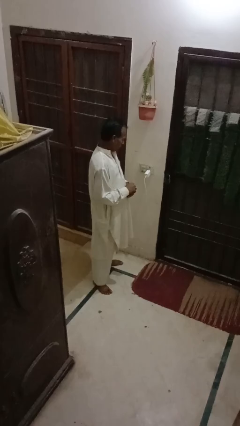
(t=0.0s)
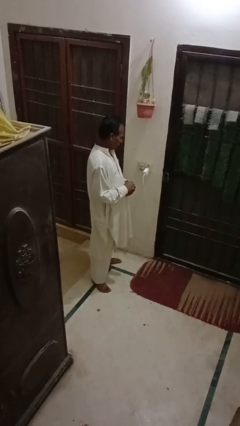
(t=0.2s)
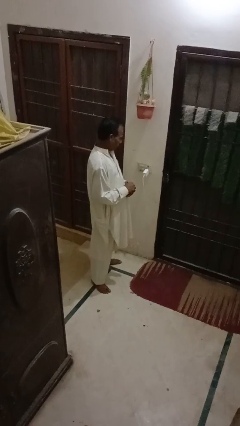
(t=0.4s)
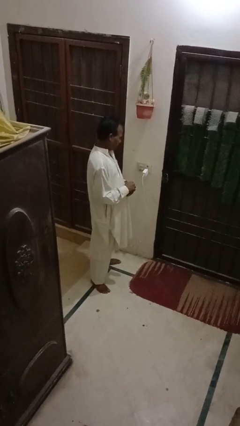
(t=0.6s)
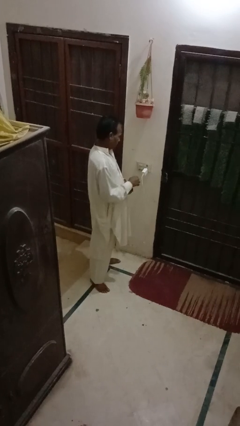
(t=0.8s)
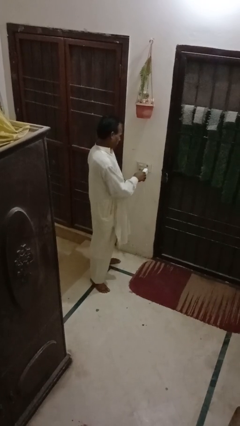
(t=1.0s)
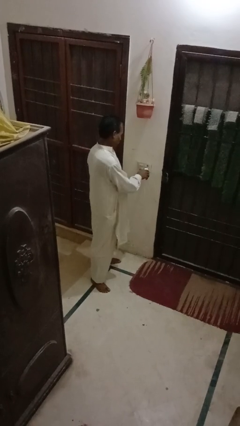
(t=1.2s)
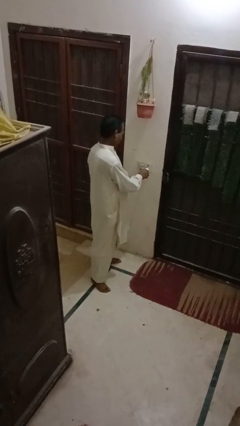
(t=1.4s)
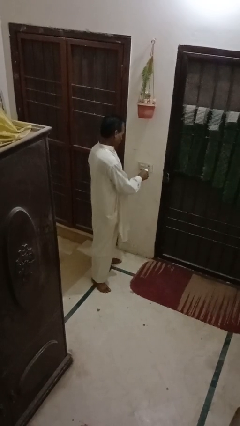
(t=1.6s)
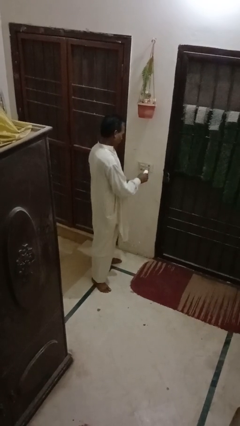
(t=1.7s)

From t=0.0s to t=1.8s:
person unplugs from electrical socket

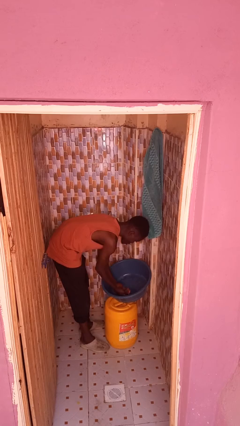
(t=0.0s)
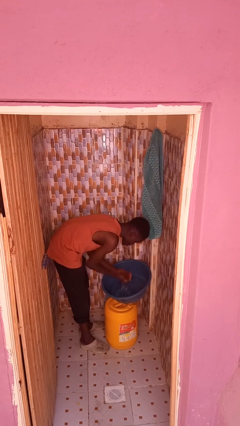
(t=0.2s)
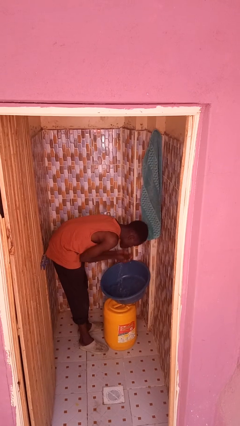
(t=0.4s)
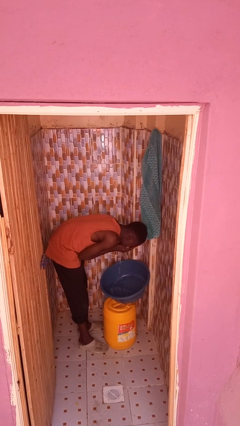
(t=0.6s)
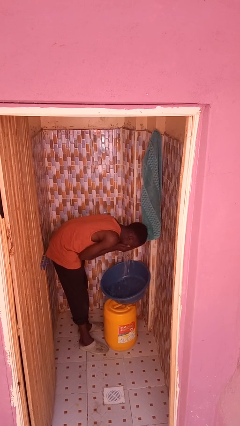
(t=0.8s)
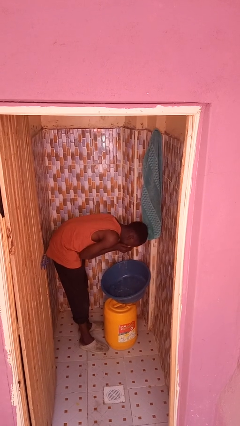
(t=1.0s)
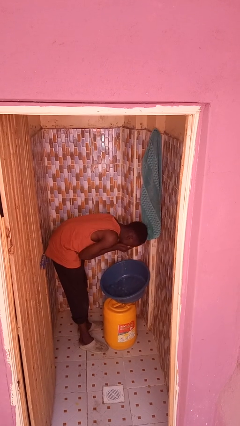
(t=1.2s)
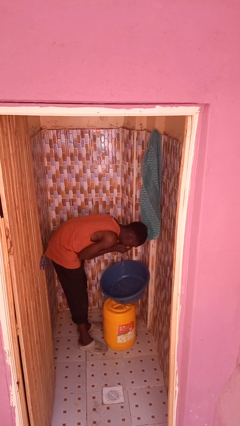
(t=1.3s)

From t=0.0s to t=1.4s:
person washes face

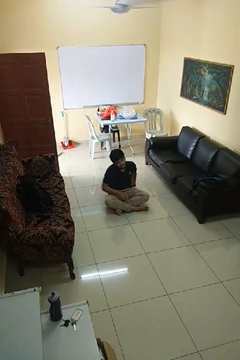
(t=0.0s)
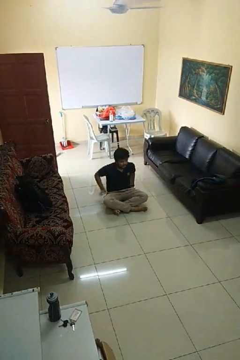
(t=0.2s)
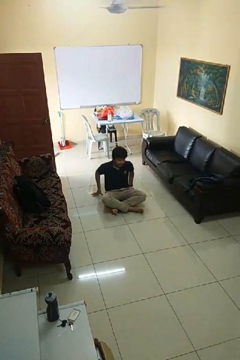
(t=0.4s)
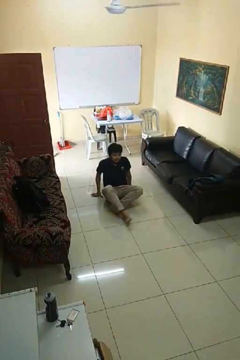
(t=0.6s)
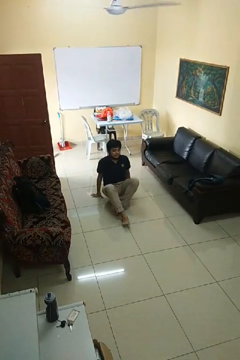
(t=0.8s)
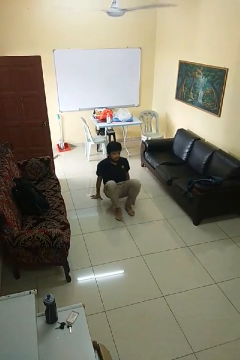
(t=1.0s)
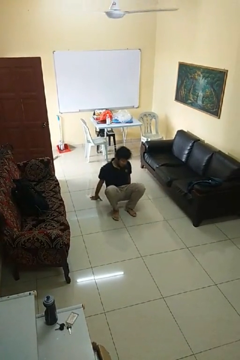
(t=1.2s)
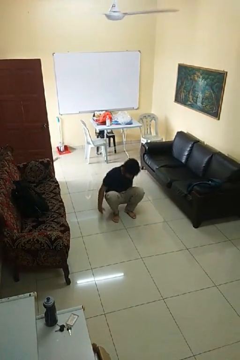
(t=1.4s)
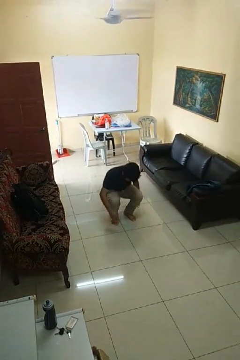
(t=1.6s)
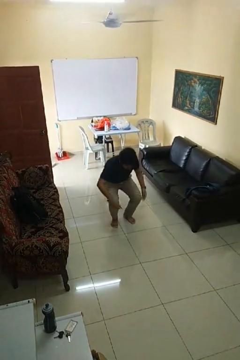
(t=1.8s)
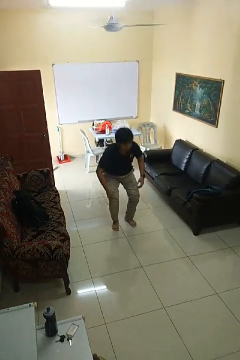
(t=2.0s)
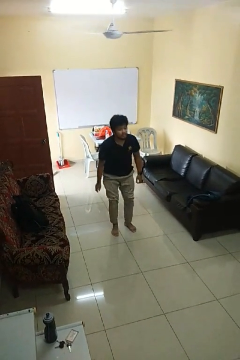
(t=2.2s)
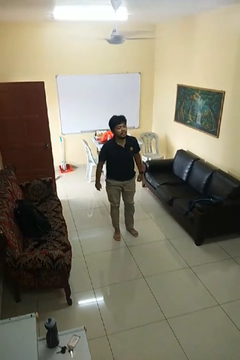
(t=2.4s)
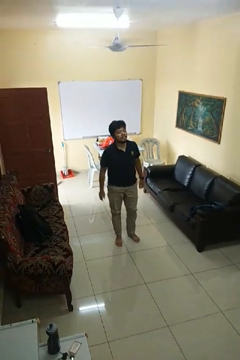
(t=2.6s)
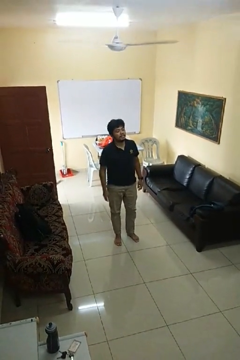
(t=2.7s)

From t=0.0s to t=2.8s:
person stands up from floor

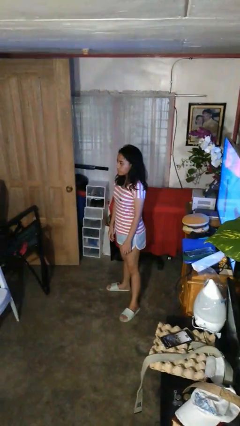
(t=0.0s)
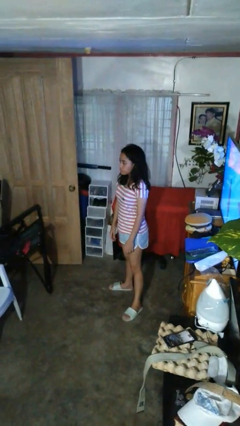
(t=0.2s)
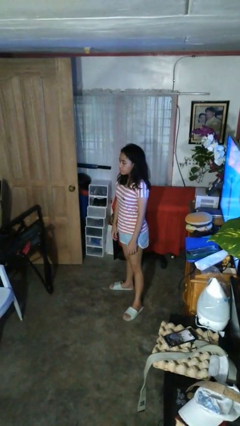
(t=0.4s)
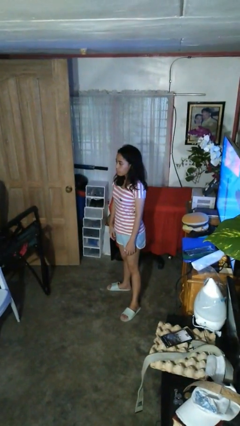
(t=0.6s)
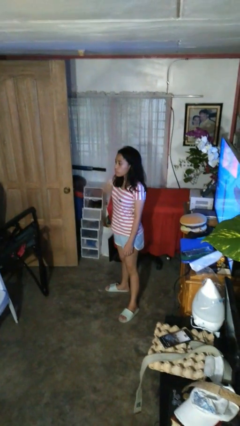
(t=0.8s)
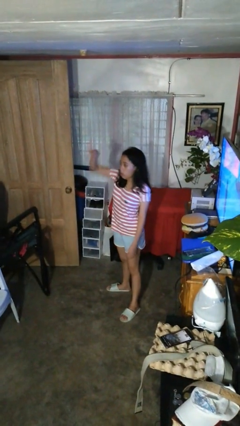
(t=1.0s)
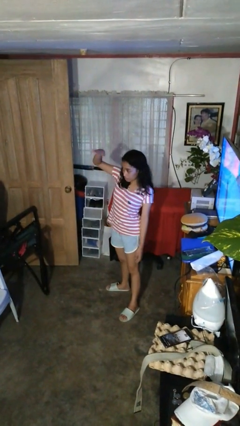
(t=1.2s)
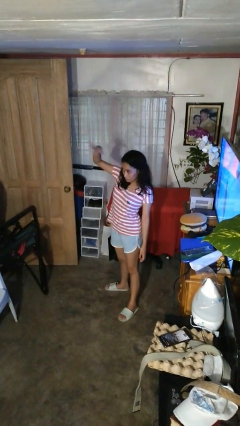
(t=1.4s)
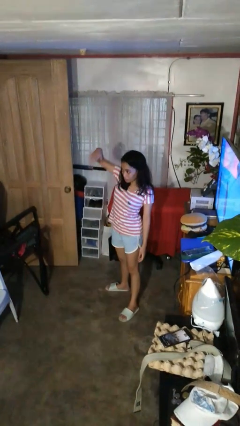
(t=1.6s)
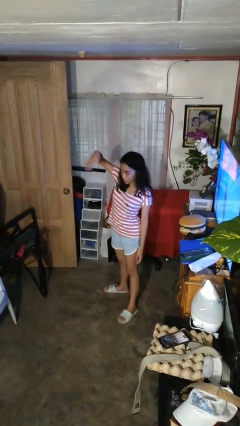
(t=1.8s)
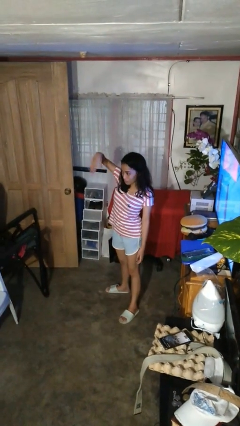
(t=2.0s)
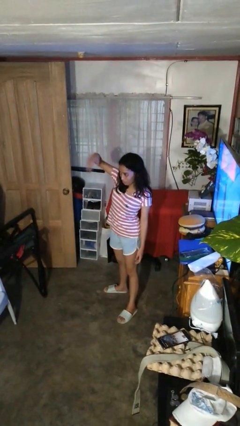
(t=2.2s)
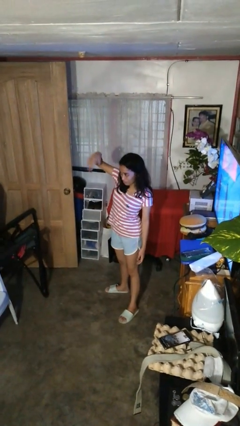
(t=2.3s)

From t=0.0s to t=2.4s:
person gestures come here

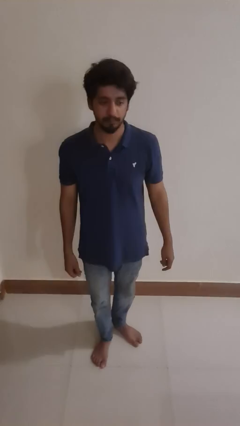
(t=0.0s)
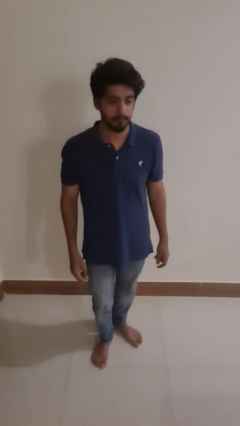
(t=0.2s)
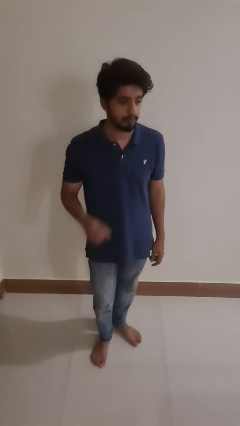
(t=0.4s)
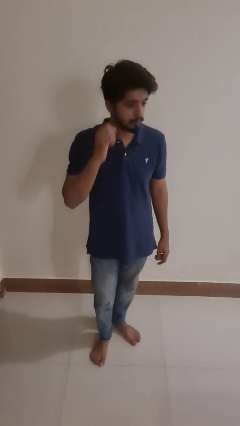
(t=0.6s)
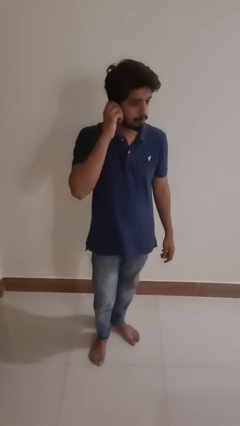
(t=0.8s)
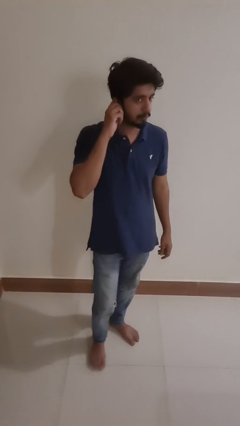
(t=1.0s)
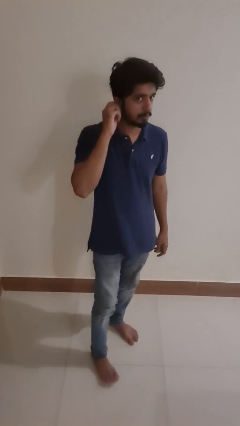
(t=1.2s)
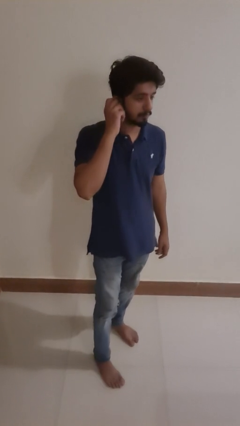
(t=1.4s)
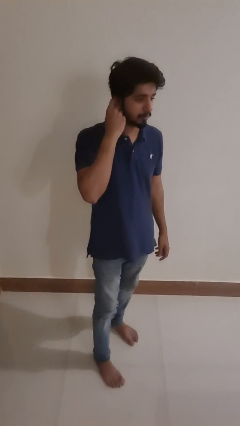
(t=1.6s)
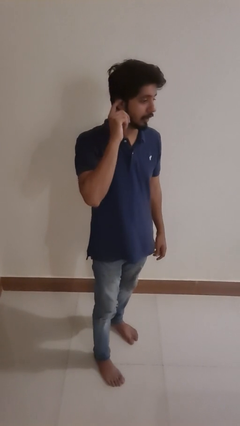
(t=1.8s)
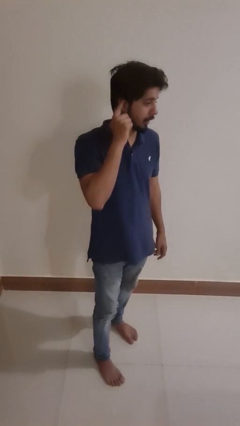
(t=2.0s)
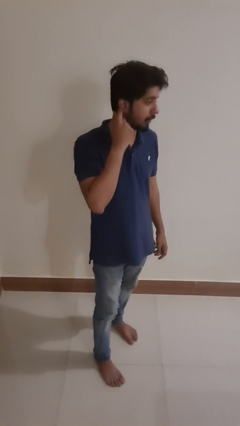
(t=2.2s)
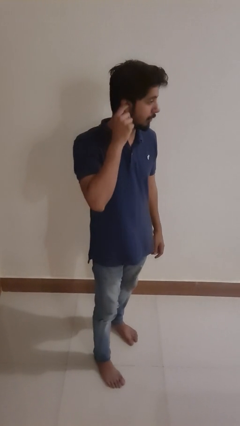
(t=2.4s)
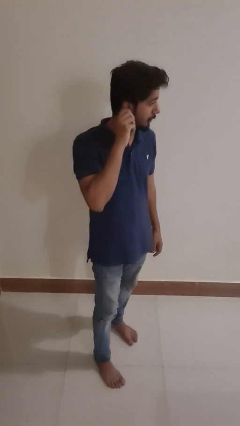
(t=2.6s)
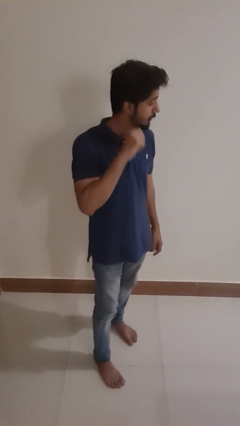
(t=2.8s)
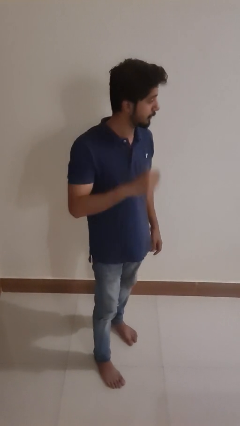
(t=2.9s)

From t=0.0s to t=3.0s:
person touches earlobe

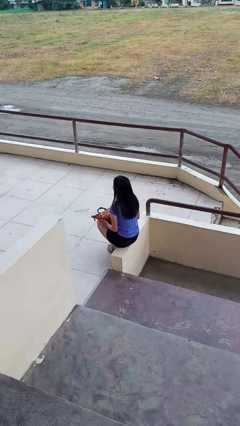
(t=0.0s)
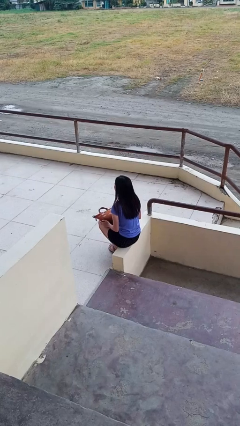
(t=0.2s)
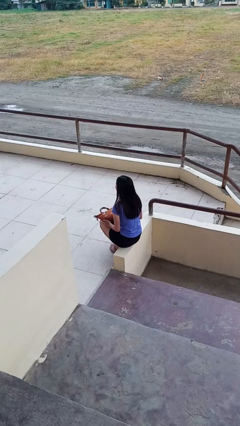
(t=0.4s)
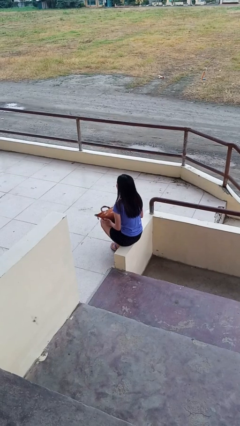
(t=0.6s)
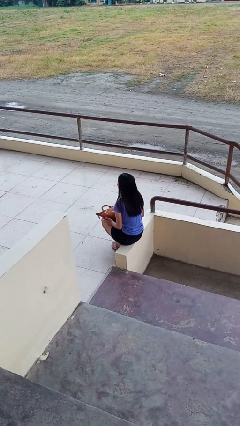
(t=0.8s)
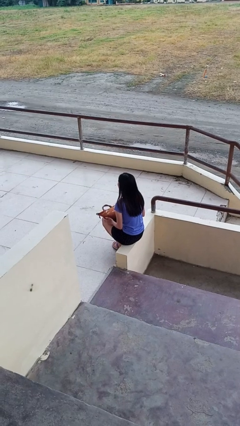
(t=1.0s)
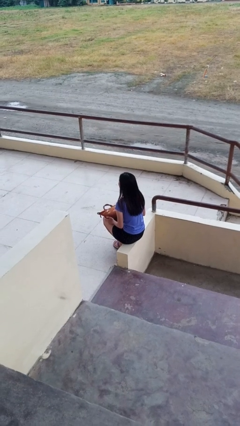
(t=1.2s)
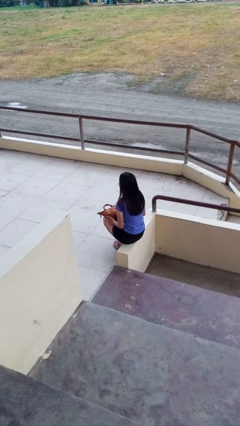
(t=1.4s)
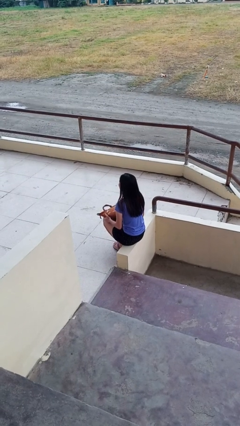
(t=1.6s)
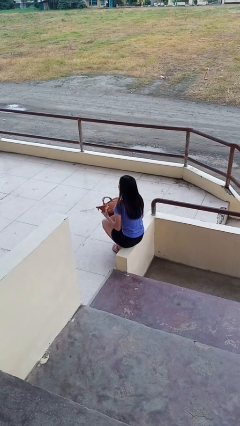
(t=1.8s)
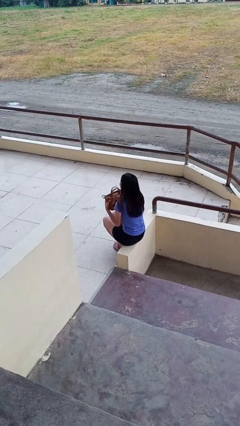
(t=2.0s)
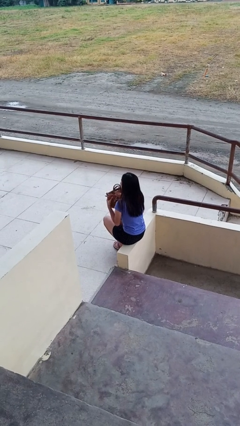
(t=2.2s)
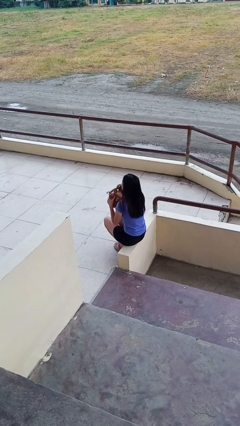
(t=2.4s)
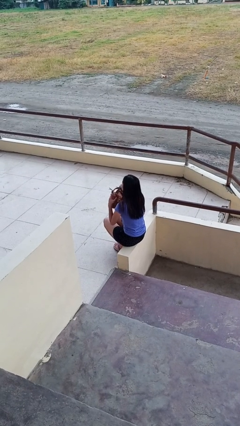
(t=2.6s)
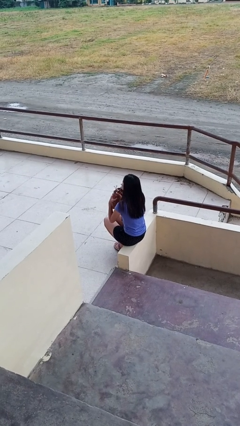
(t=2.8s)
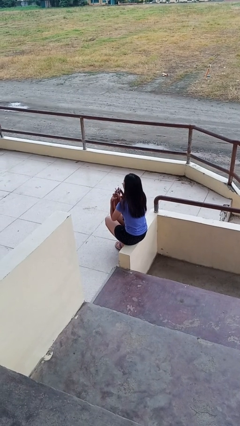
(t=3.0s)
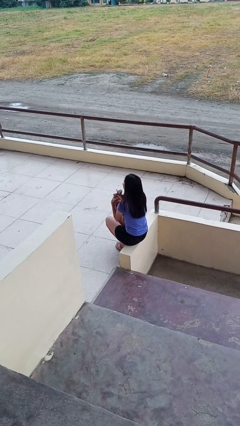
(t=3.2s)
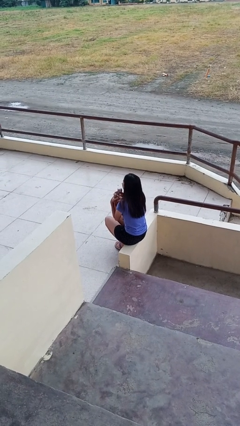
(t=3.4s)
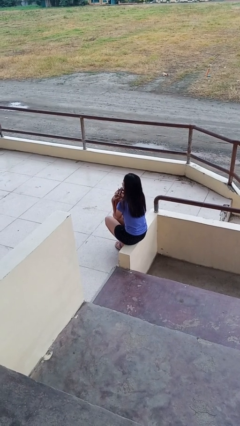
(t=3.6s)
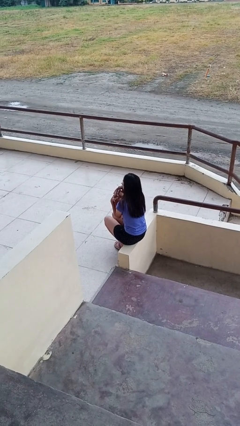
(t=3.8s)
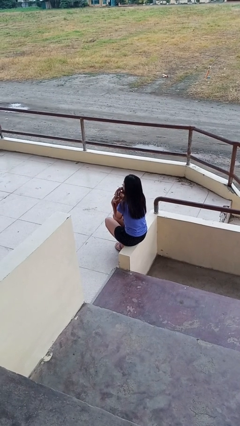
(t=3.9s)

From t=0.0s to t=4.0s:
person squeezes object

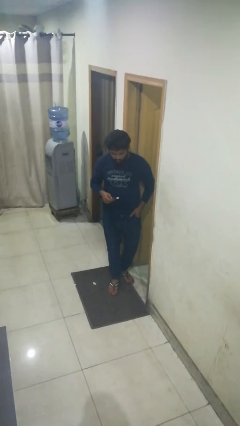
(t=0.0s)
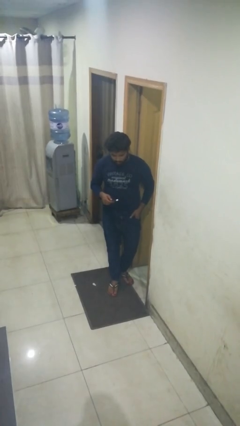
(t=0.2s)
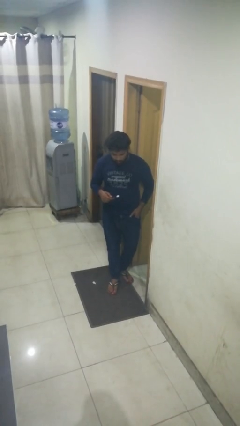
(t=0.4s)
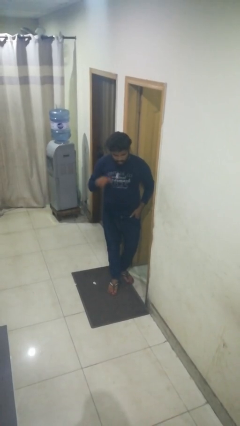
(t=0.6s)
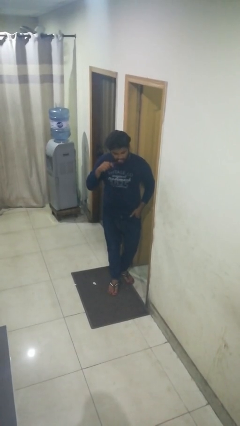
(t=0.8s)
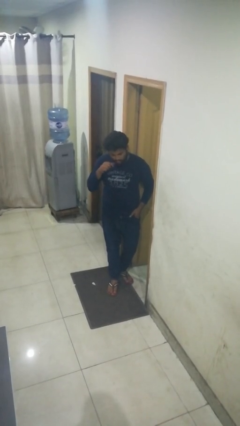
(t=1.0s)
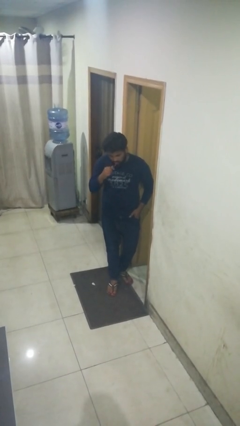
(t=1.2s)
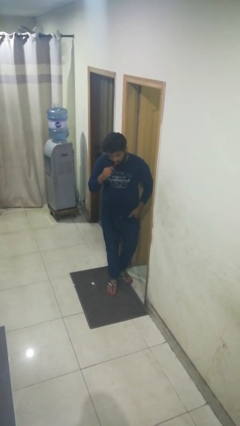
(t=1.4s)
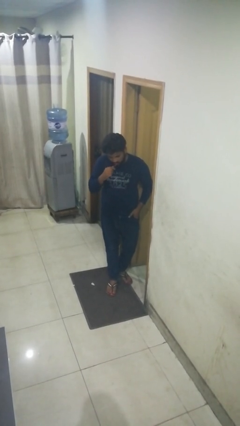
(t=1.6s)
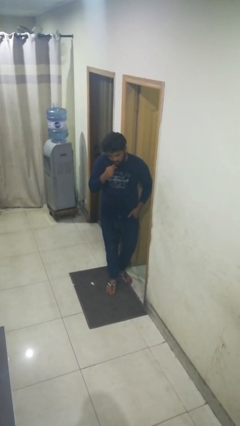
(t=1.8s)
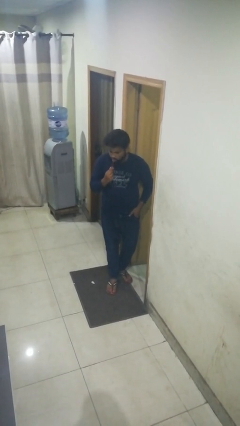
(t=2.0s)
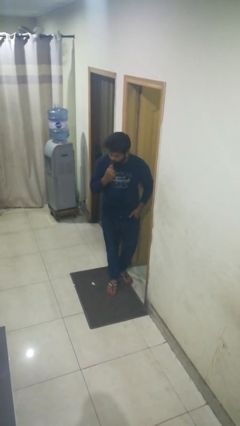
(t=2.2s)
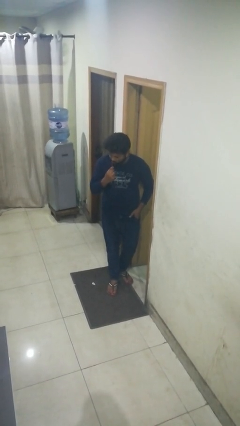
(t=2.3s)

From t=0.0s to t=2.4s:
person brushes teeth
